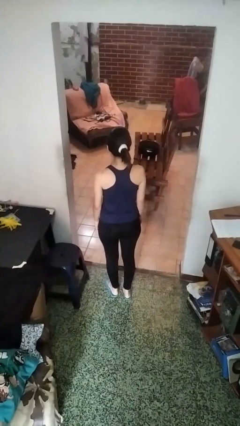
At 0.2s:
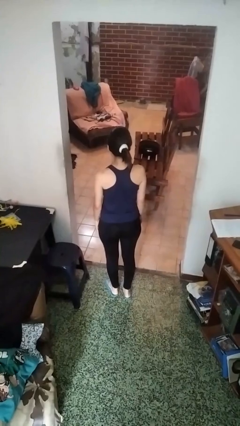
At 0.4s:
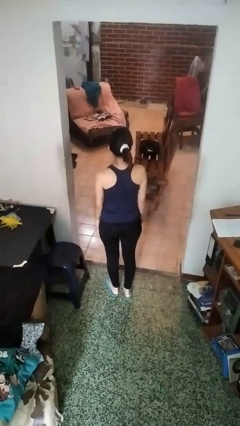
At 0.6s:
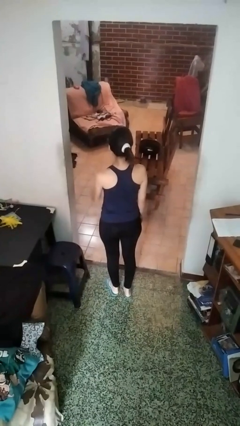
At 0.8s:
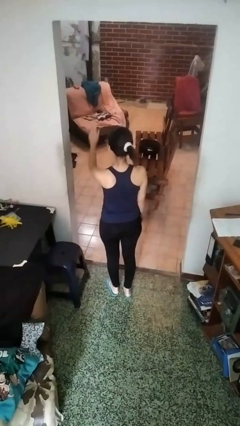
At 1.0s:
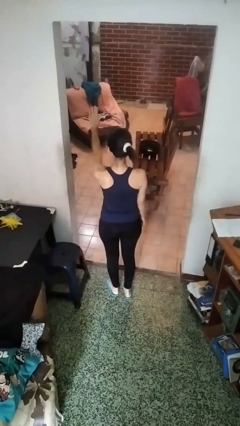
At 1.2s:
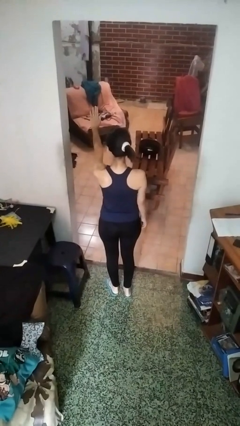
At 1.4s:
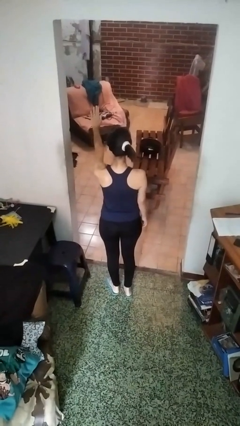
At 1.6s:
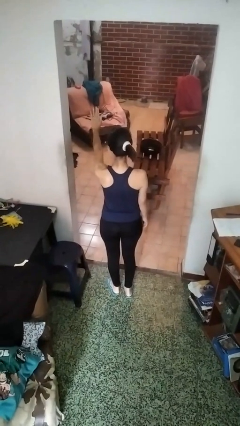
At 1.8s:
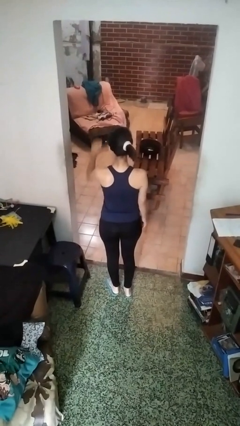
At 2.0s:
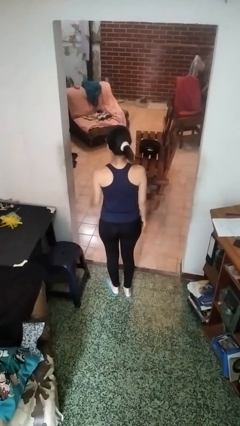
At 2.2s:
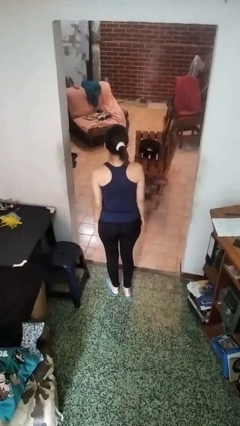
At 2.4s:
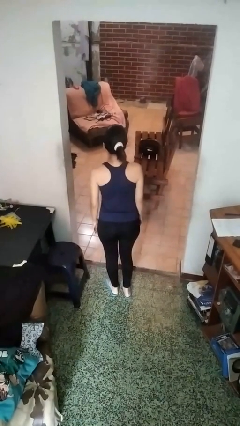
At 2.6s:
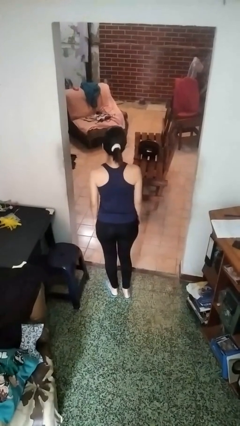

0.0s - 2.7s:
person gestures stop

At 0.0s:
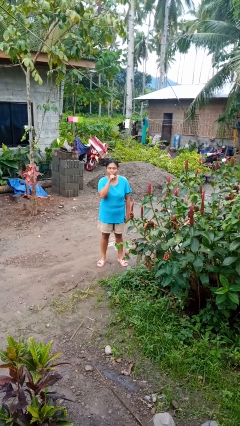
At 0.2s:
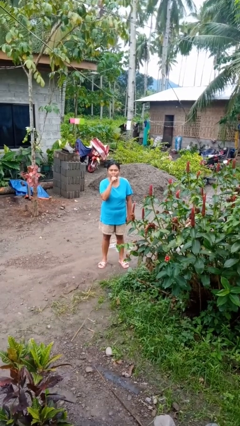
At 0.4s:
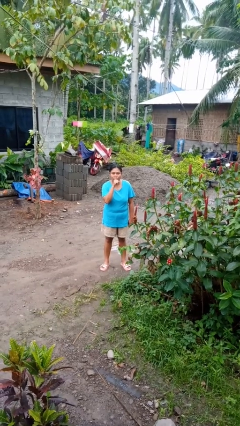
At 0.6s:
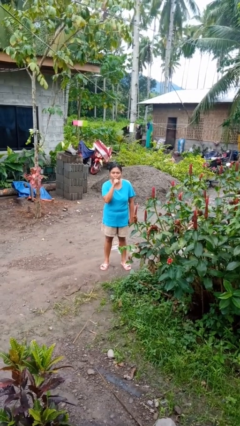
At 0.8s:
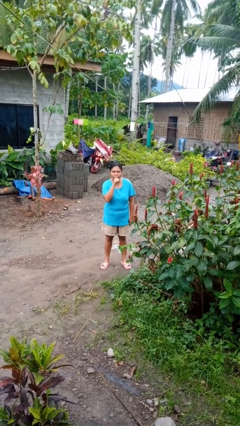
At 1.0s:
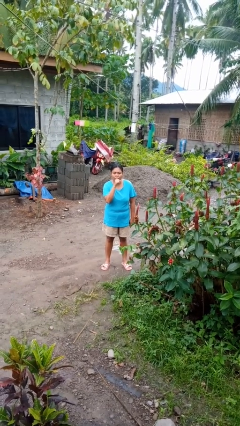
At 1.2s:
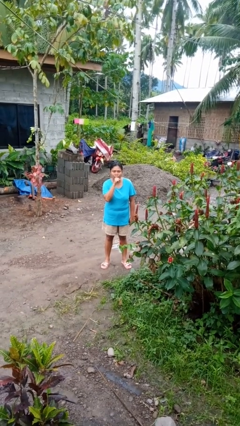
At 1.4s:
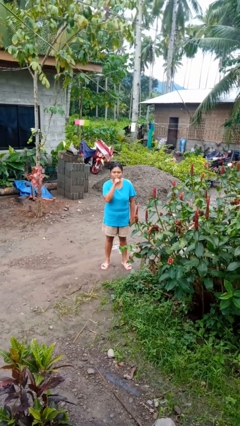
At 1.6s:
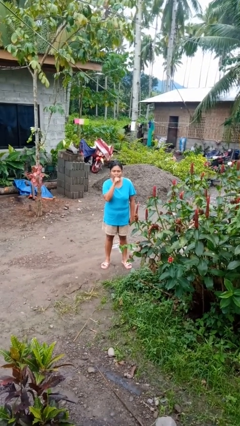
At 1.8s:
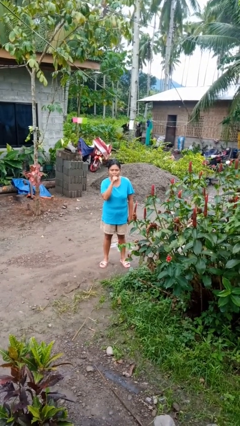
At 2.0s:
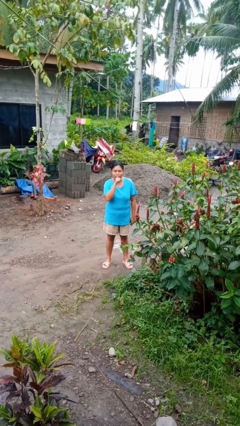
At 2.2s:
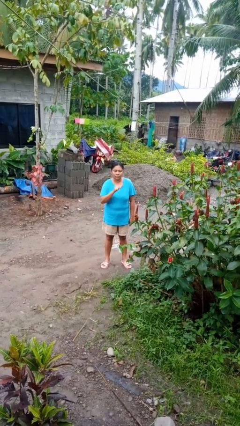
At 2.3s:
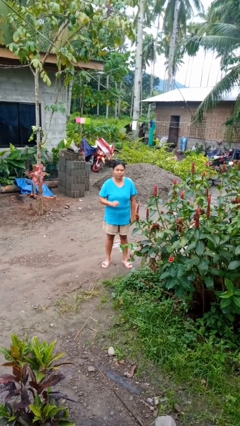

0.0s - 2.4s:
person gestures be quiet

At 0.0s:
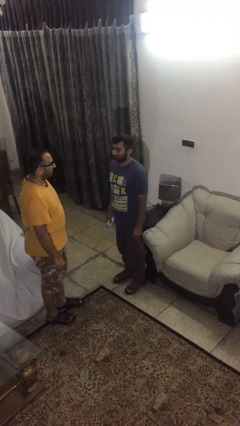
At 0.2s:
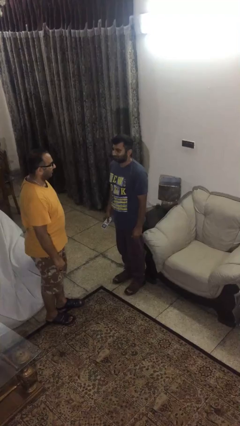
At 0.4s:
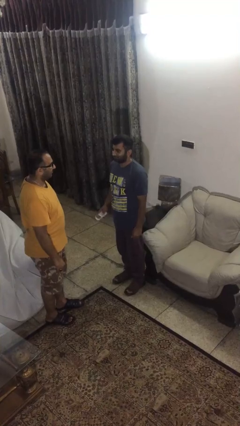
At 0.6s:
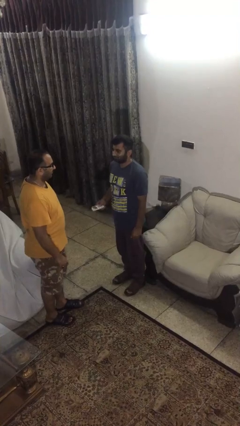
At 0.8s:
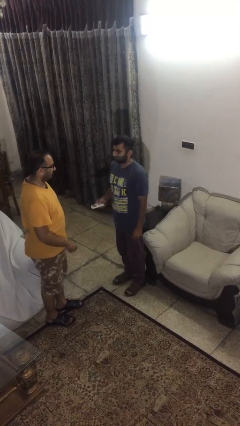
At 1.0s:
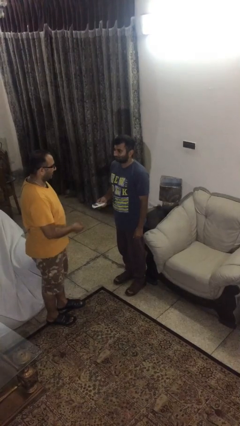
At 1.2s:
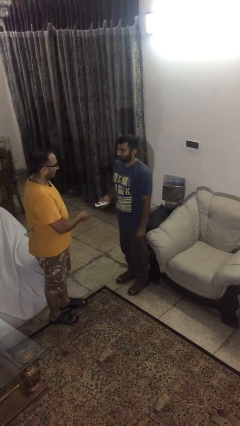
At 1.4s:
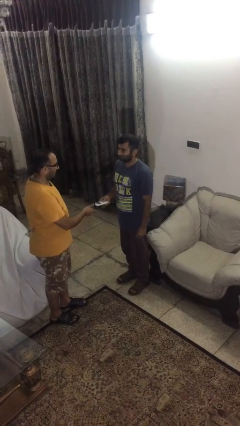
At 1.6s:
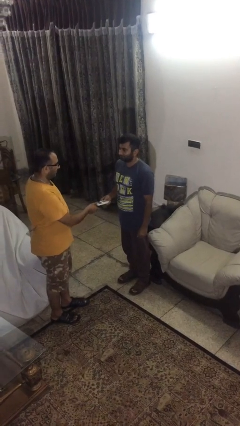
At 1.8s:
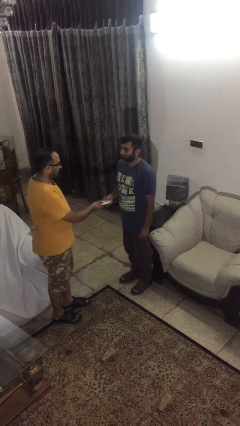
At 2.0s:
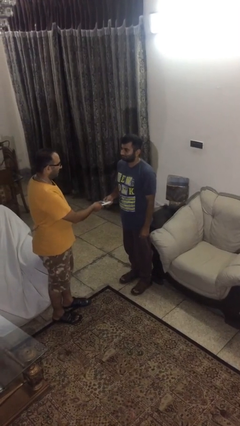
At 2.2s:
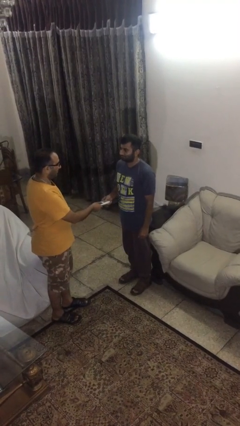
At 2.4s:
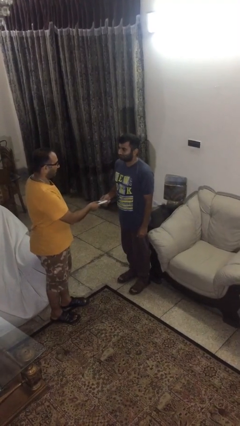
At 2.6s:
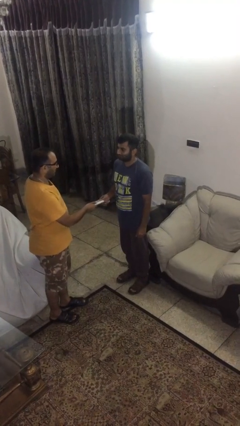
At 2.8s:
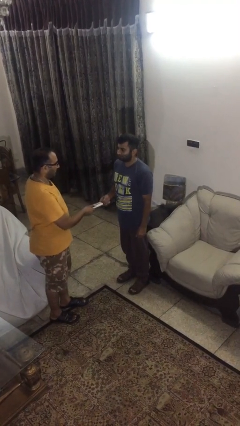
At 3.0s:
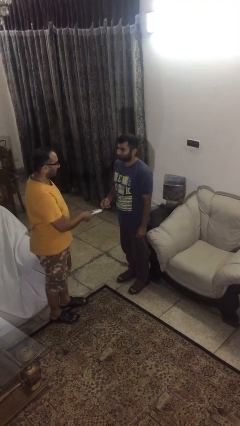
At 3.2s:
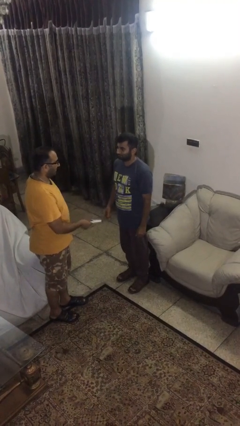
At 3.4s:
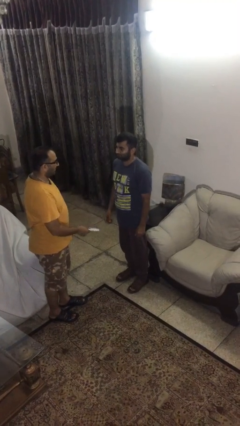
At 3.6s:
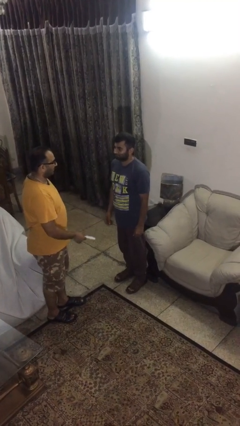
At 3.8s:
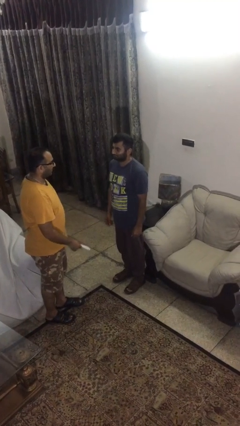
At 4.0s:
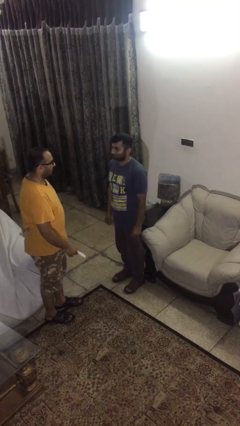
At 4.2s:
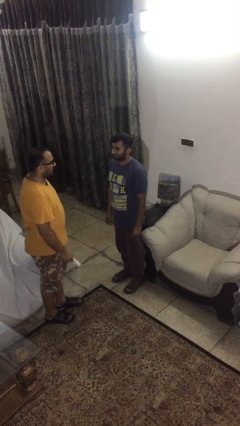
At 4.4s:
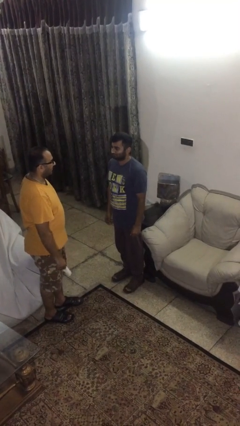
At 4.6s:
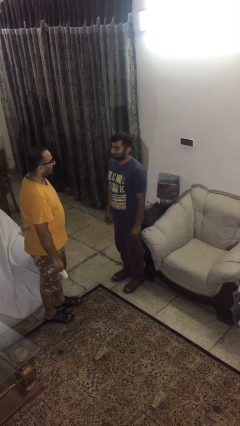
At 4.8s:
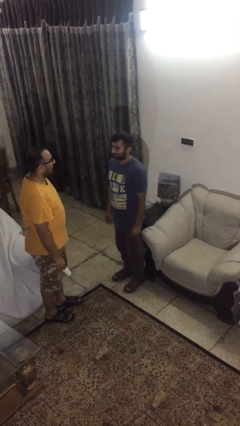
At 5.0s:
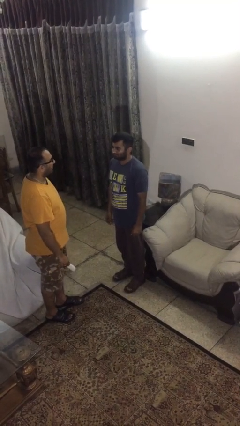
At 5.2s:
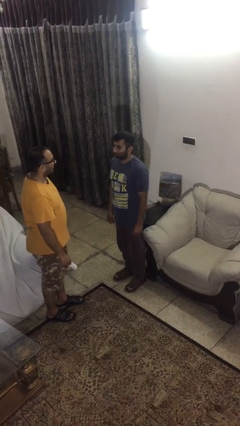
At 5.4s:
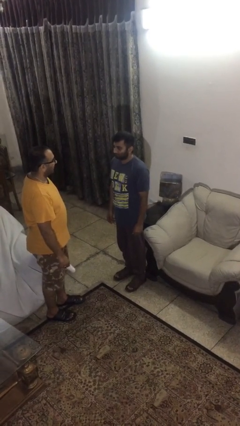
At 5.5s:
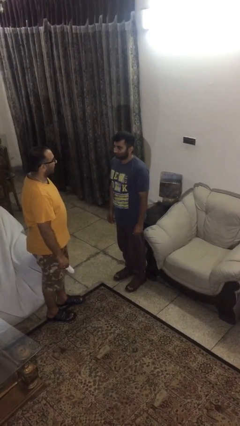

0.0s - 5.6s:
person transfers object to person

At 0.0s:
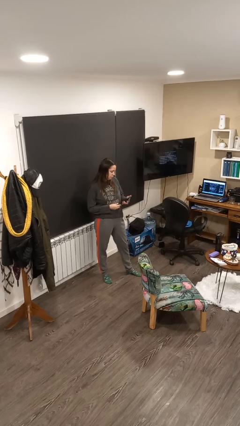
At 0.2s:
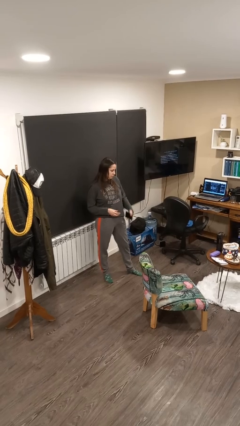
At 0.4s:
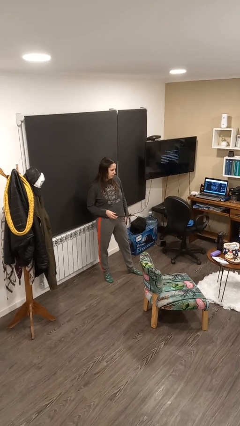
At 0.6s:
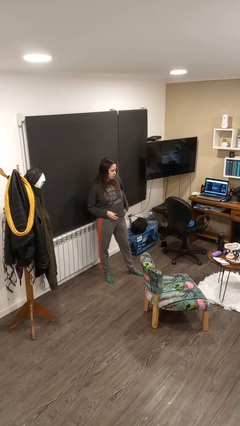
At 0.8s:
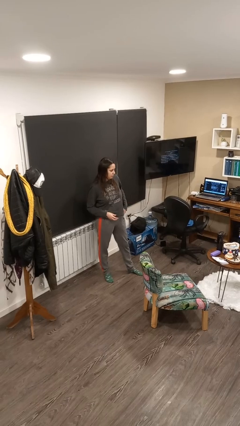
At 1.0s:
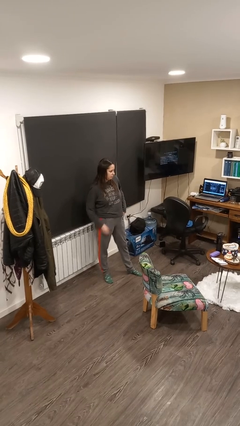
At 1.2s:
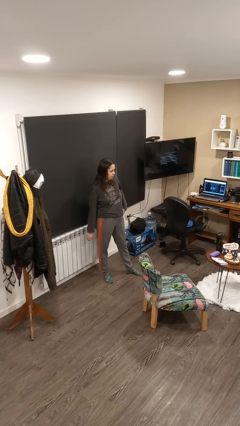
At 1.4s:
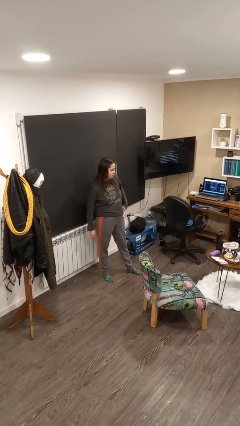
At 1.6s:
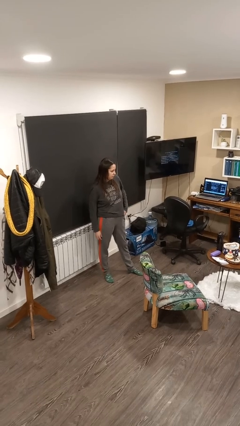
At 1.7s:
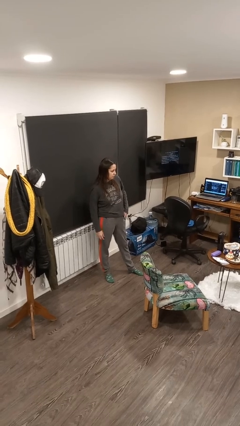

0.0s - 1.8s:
person puts phone into pocket

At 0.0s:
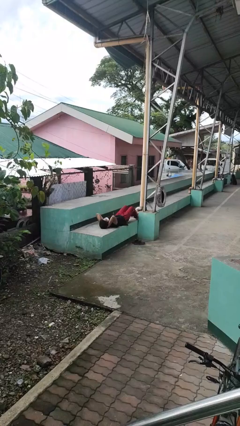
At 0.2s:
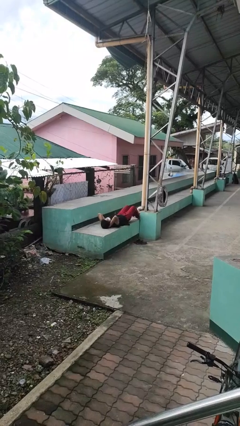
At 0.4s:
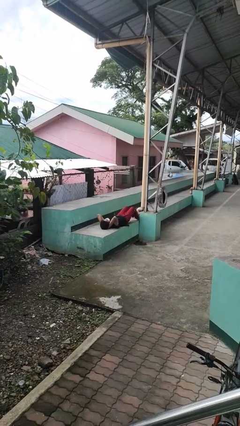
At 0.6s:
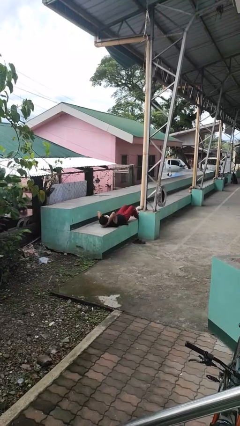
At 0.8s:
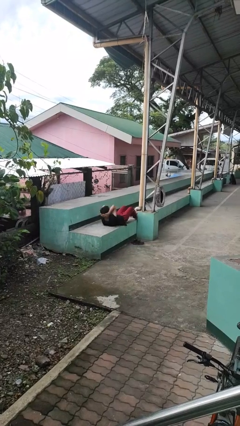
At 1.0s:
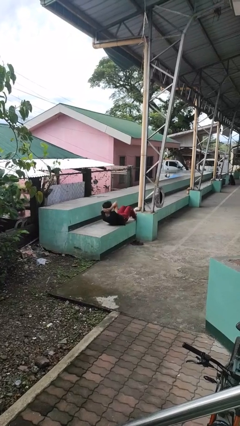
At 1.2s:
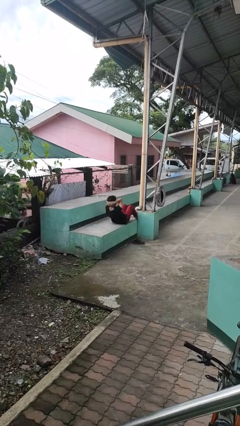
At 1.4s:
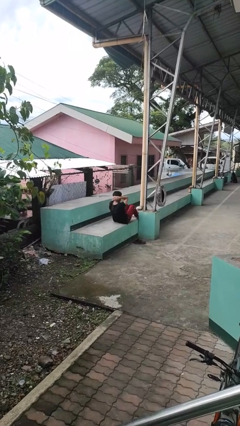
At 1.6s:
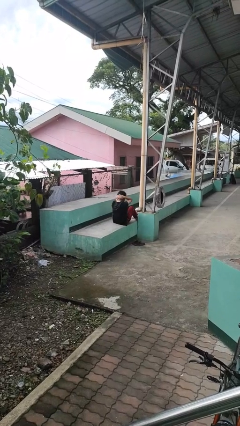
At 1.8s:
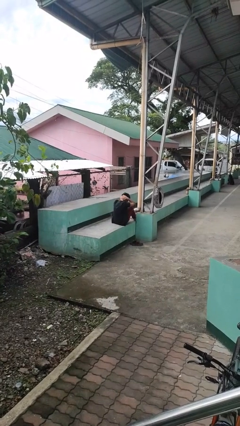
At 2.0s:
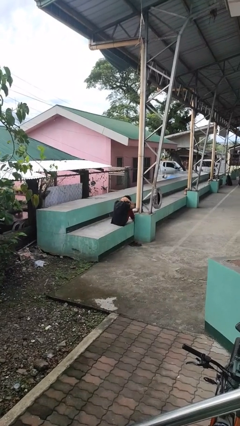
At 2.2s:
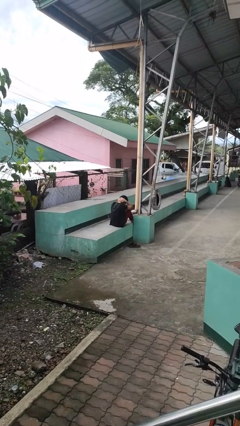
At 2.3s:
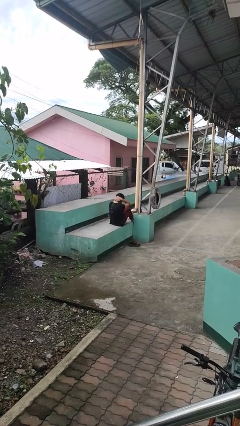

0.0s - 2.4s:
person exercises with situp

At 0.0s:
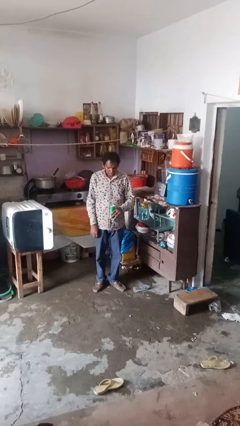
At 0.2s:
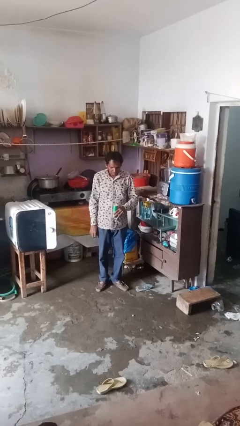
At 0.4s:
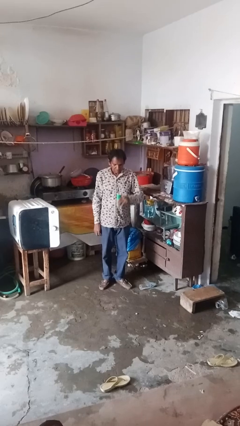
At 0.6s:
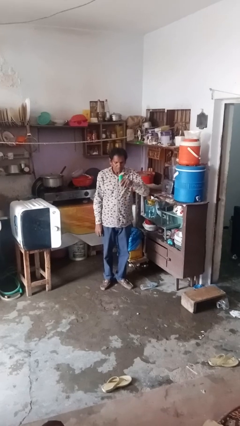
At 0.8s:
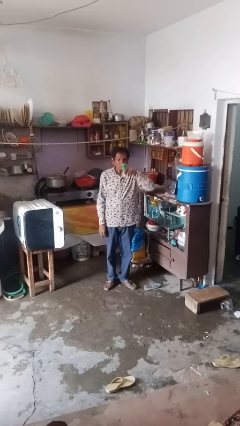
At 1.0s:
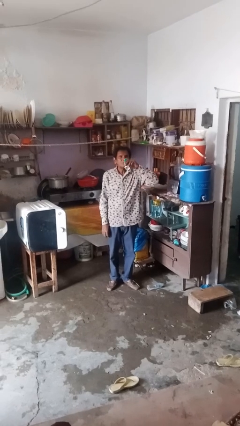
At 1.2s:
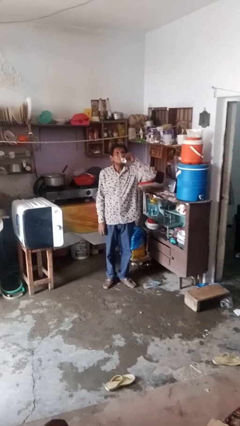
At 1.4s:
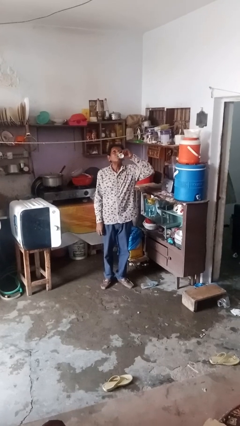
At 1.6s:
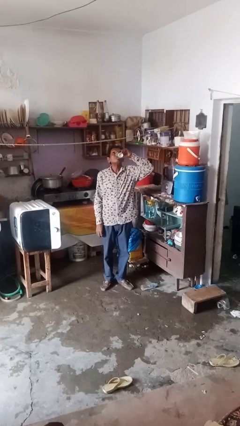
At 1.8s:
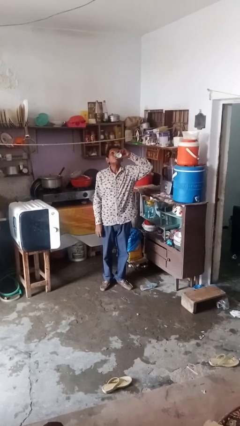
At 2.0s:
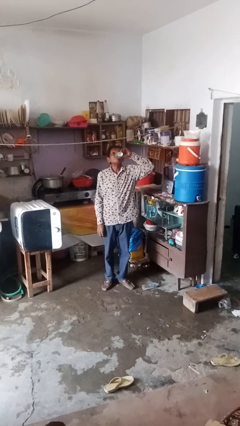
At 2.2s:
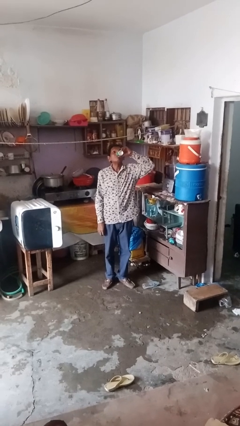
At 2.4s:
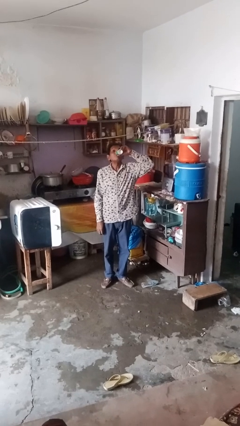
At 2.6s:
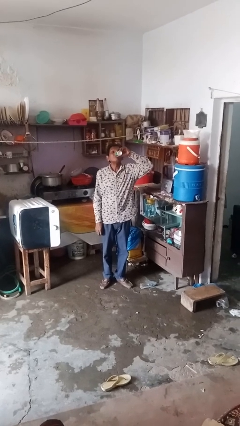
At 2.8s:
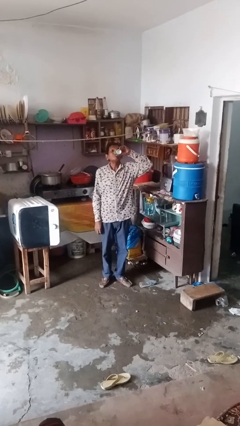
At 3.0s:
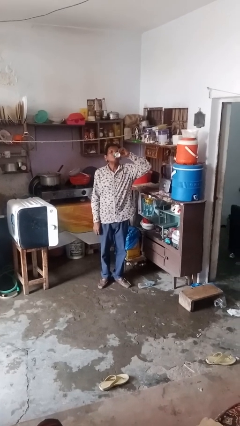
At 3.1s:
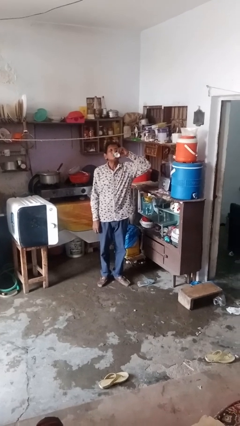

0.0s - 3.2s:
person drinks from beverage can
